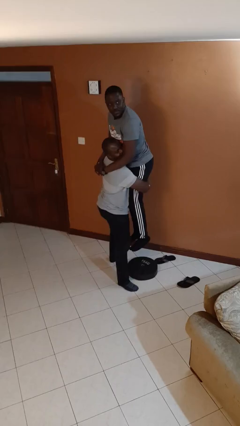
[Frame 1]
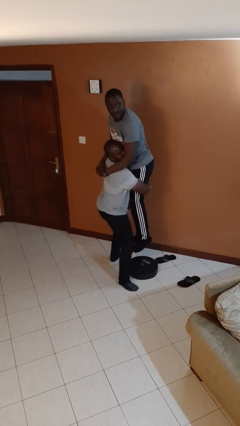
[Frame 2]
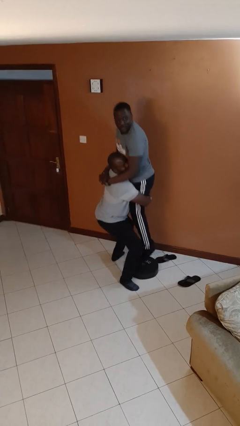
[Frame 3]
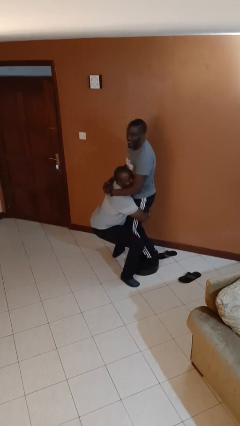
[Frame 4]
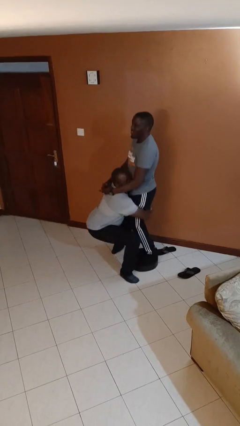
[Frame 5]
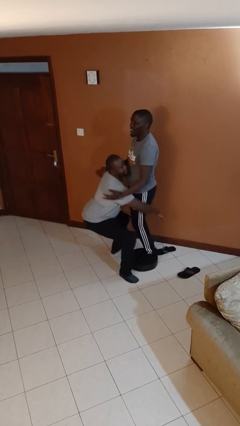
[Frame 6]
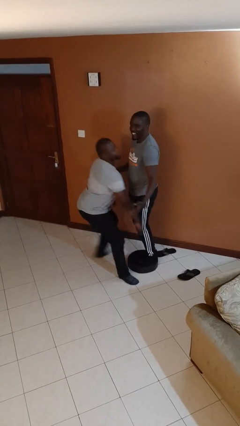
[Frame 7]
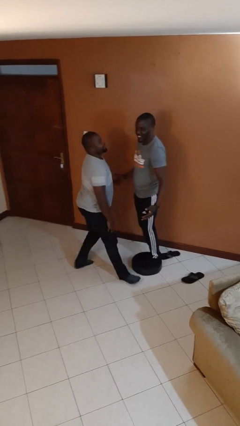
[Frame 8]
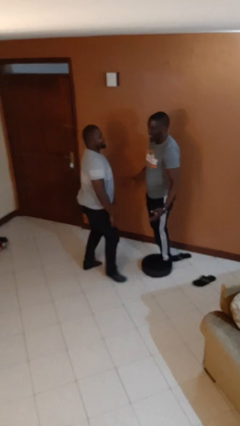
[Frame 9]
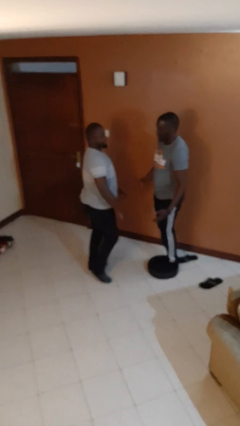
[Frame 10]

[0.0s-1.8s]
person puts down person

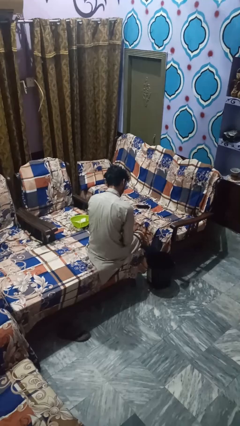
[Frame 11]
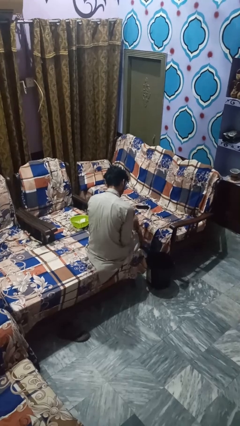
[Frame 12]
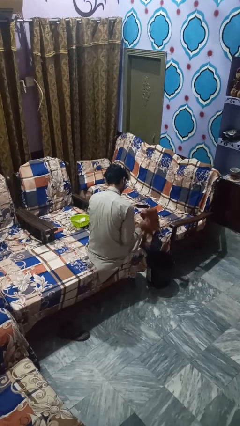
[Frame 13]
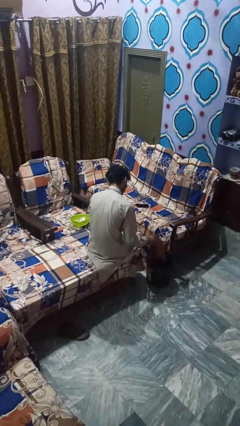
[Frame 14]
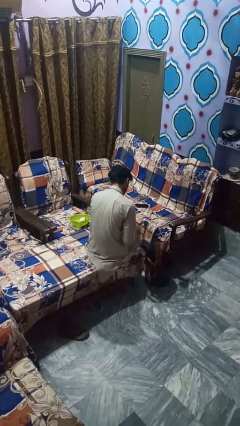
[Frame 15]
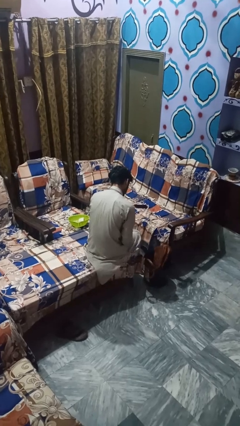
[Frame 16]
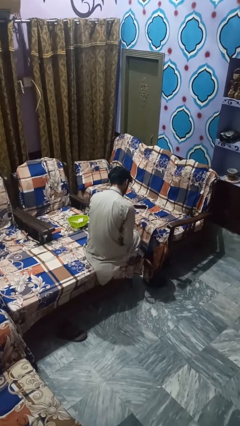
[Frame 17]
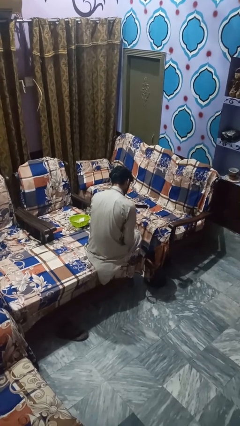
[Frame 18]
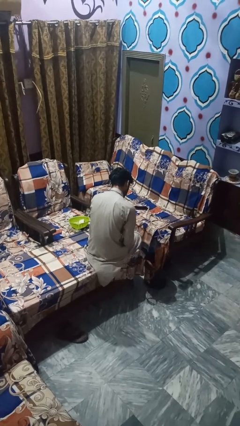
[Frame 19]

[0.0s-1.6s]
person puts object into basket

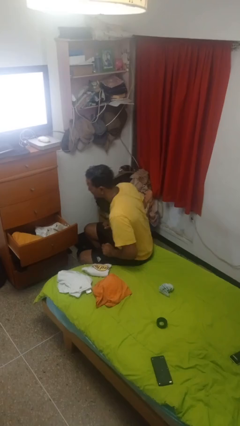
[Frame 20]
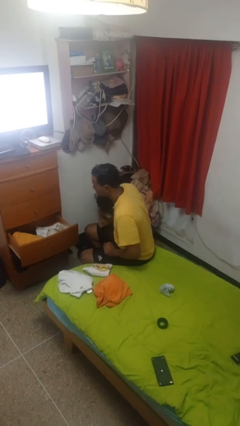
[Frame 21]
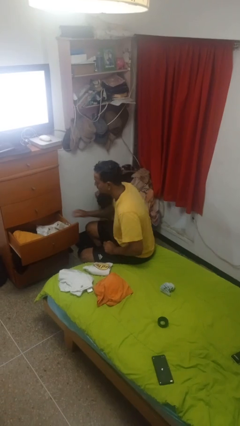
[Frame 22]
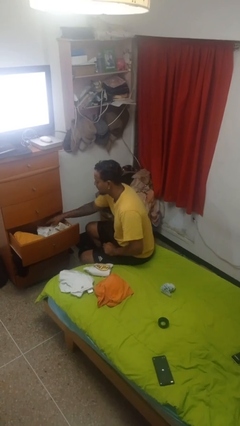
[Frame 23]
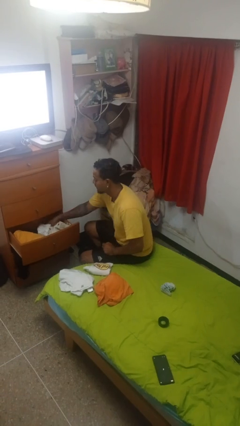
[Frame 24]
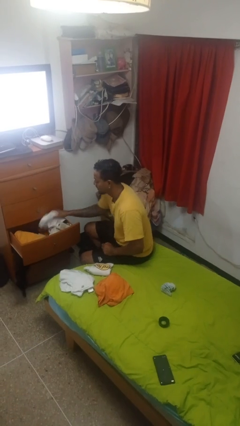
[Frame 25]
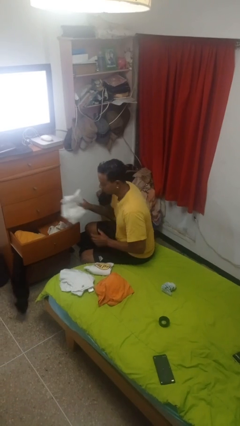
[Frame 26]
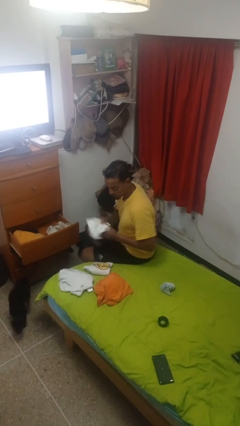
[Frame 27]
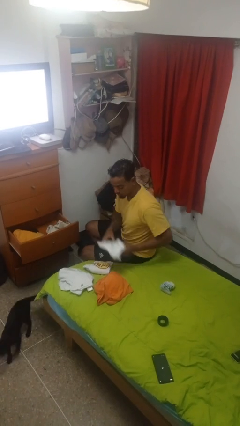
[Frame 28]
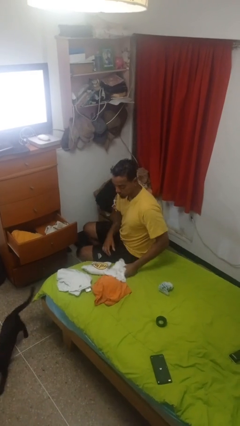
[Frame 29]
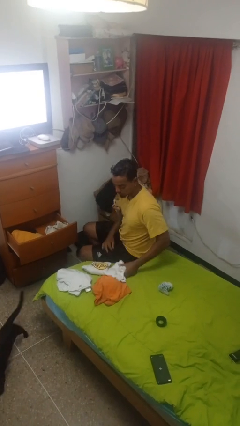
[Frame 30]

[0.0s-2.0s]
person takes clothes from dresser

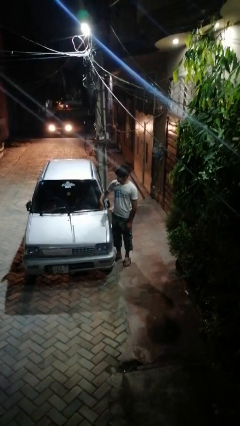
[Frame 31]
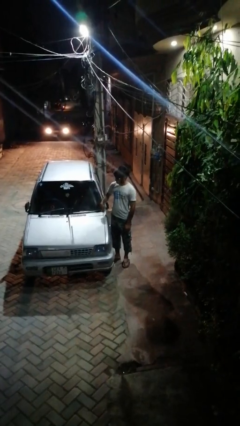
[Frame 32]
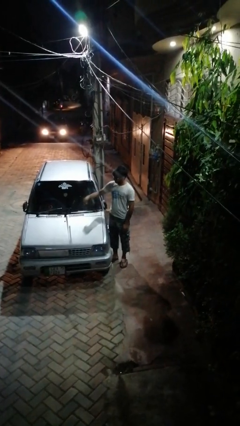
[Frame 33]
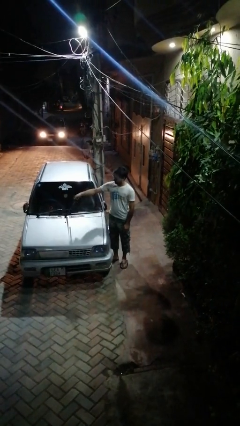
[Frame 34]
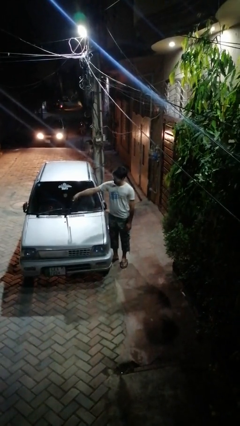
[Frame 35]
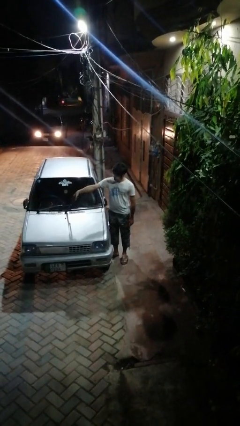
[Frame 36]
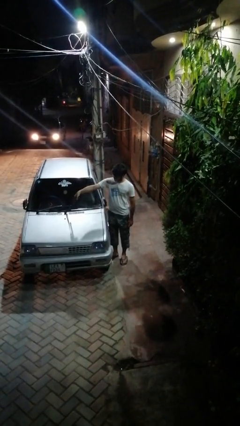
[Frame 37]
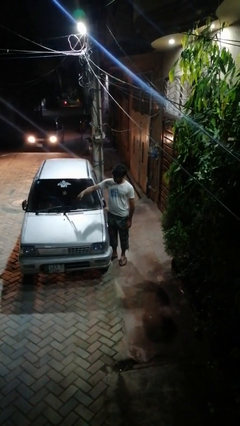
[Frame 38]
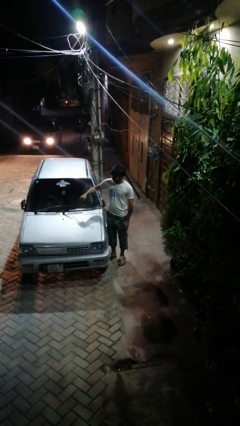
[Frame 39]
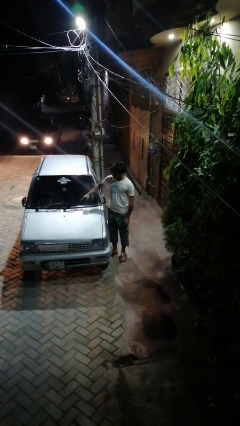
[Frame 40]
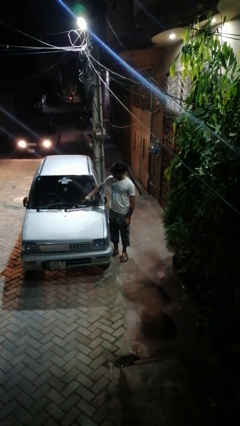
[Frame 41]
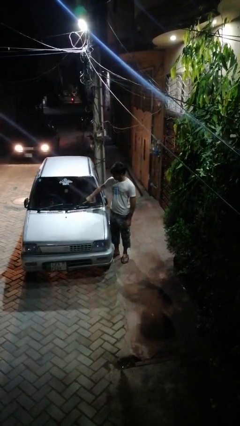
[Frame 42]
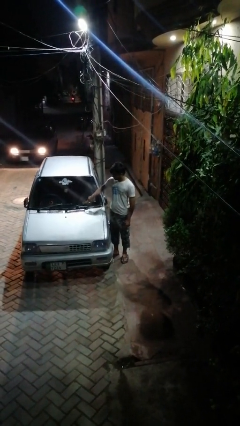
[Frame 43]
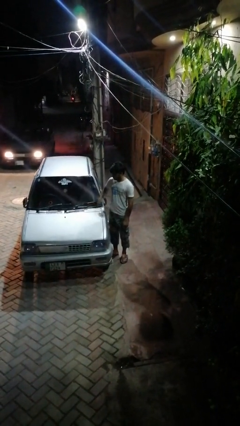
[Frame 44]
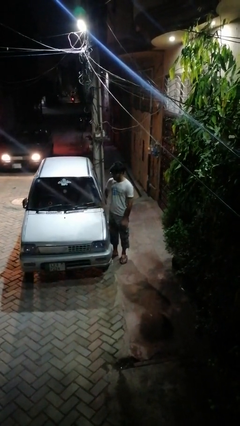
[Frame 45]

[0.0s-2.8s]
person flips down car wipers

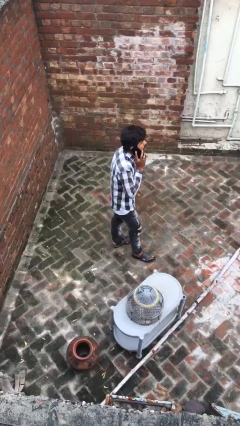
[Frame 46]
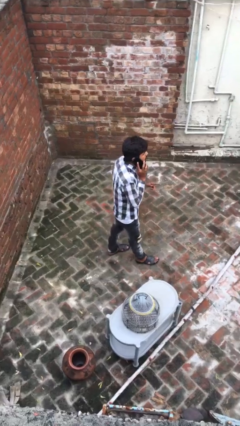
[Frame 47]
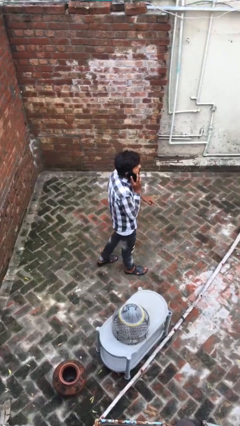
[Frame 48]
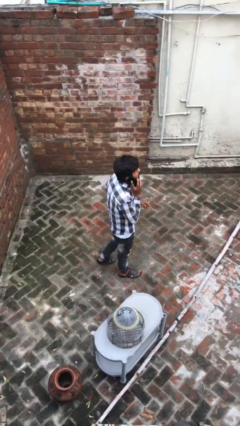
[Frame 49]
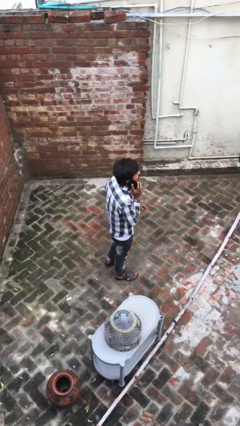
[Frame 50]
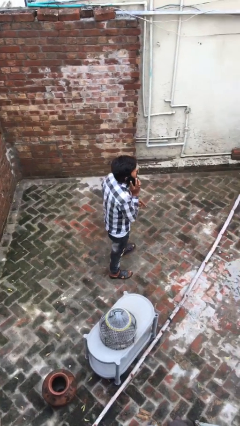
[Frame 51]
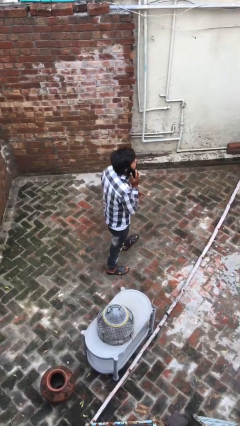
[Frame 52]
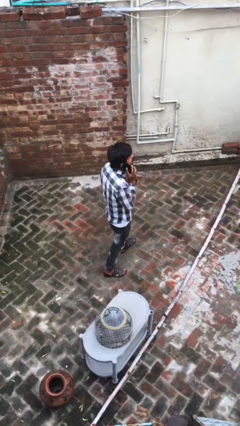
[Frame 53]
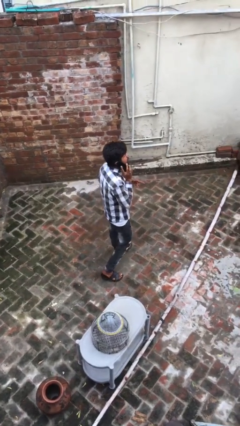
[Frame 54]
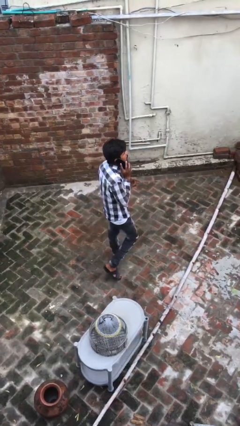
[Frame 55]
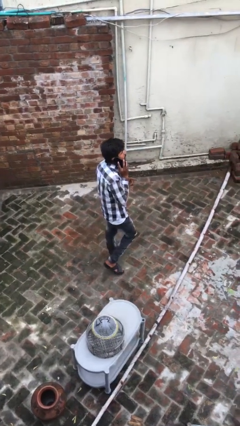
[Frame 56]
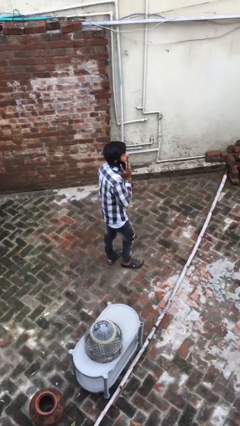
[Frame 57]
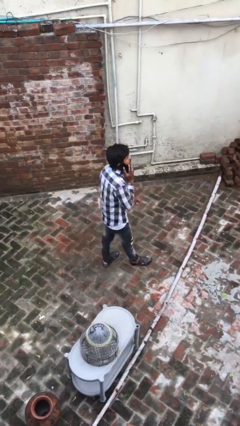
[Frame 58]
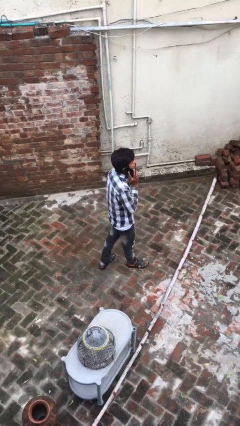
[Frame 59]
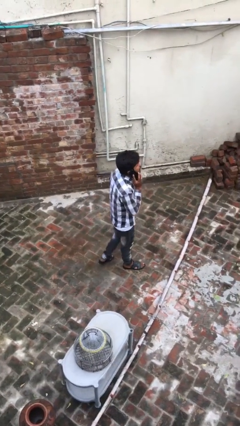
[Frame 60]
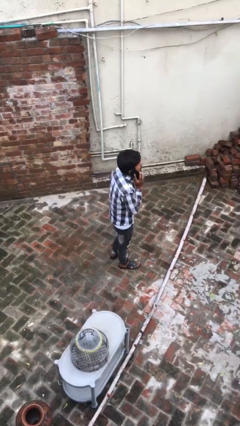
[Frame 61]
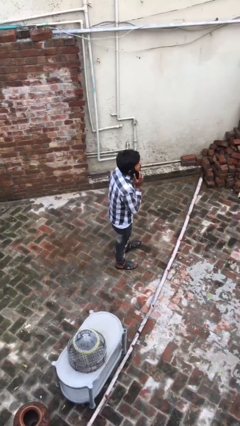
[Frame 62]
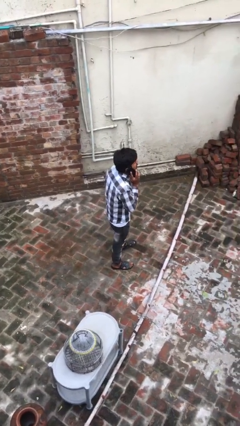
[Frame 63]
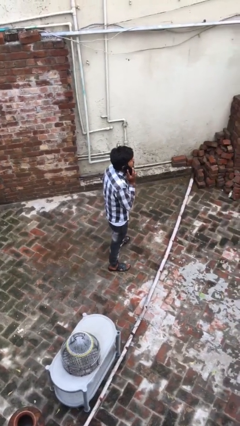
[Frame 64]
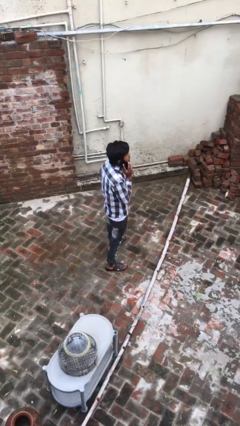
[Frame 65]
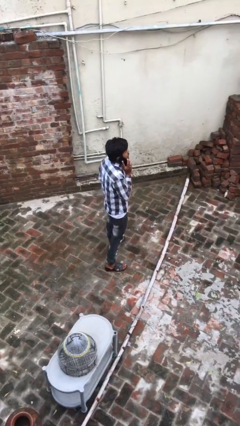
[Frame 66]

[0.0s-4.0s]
person talks on phone

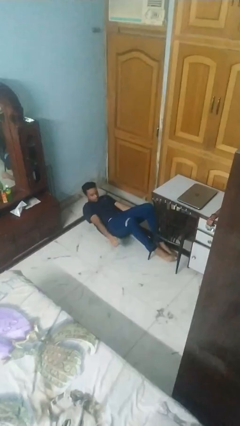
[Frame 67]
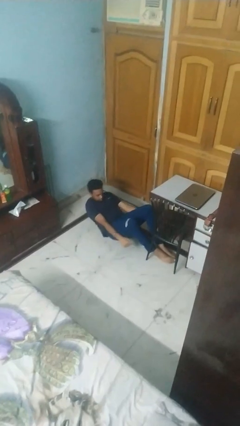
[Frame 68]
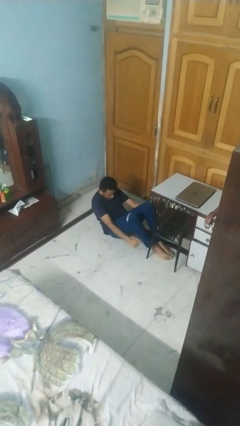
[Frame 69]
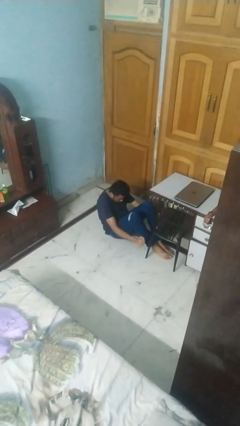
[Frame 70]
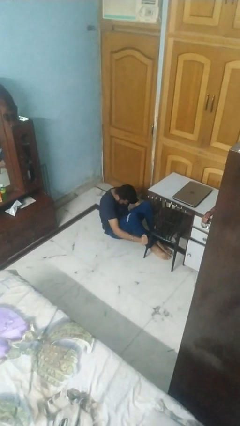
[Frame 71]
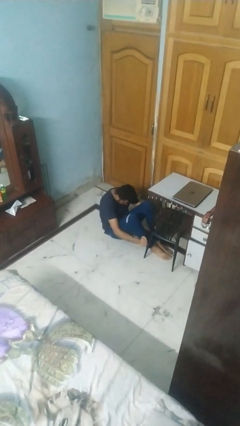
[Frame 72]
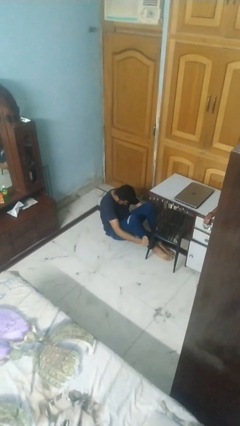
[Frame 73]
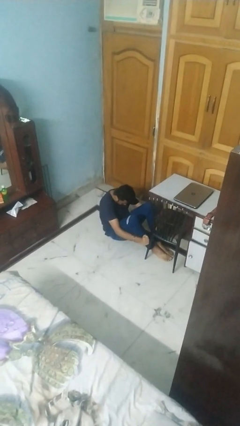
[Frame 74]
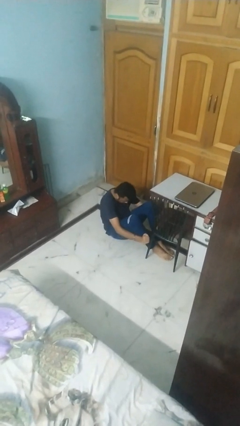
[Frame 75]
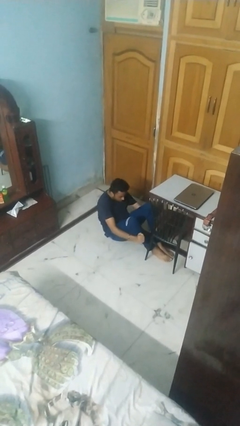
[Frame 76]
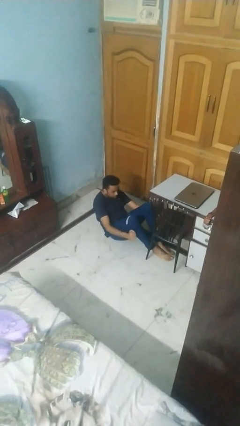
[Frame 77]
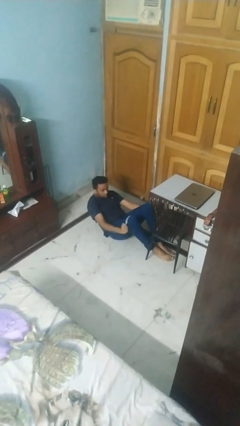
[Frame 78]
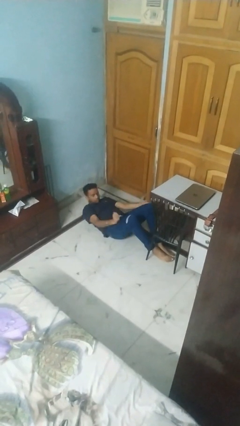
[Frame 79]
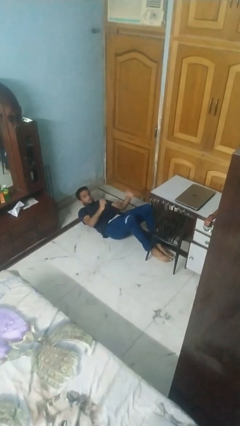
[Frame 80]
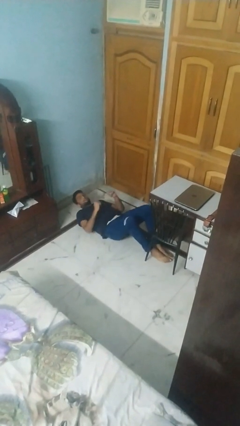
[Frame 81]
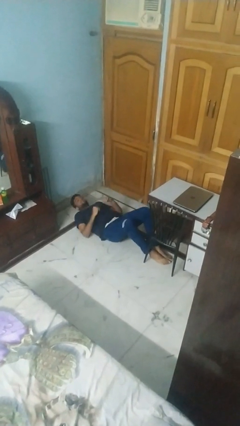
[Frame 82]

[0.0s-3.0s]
person exercises with situp

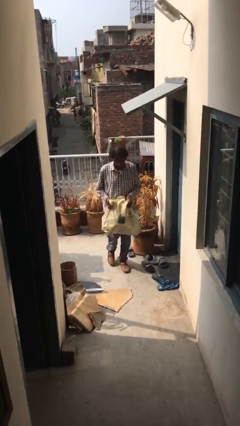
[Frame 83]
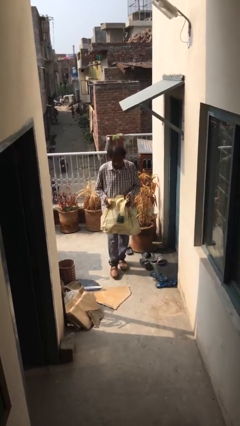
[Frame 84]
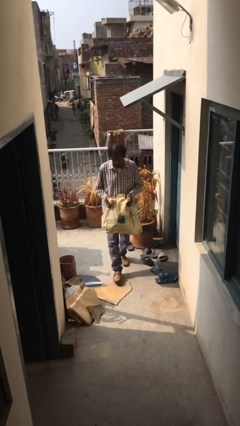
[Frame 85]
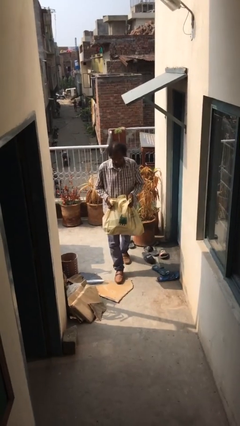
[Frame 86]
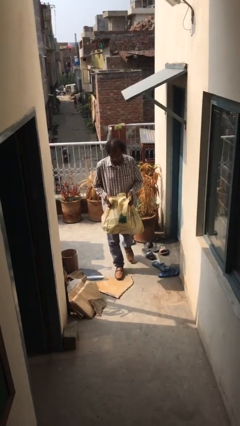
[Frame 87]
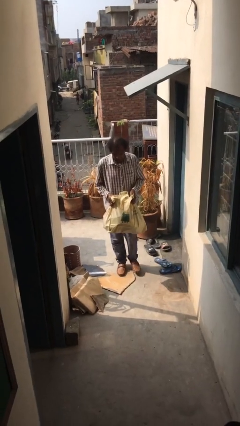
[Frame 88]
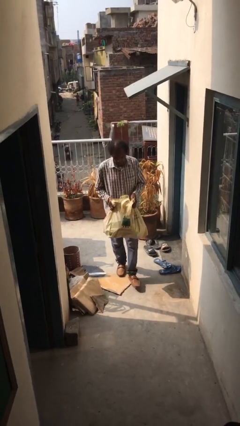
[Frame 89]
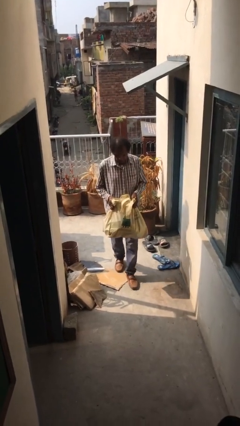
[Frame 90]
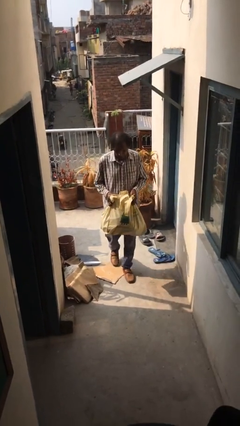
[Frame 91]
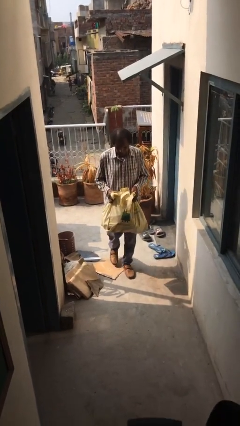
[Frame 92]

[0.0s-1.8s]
person carries heavy object
